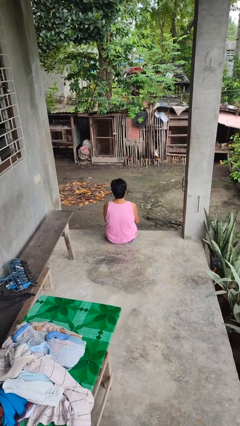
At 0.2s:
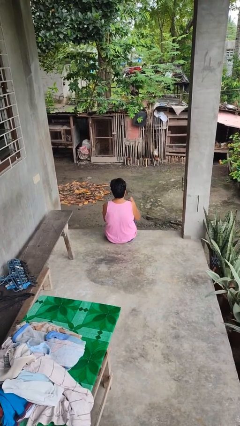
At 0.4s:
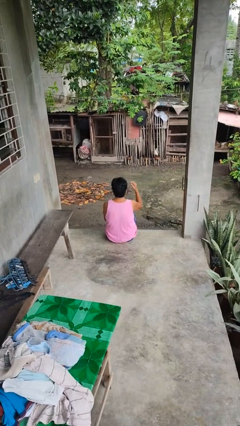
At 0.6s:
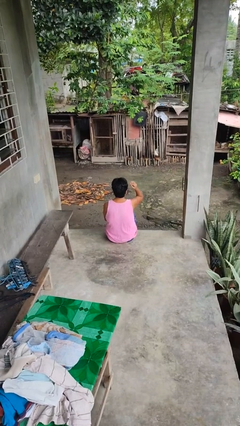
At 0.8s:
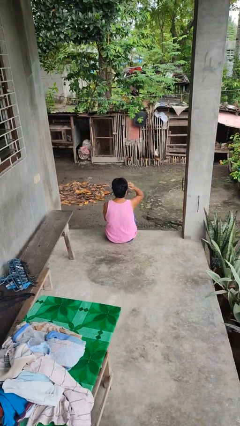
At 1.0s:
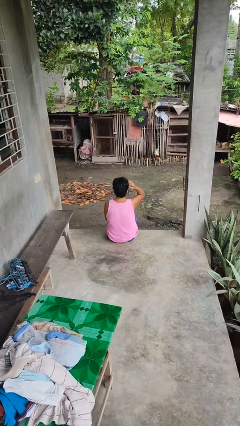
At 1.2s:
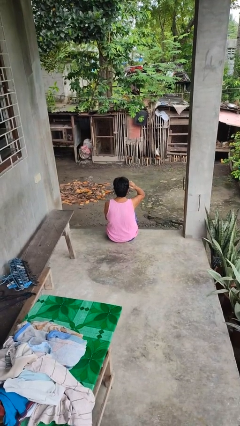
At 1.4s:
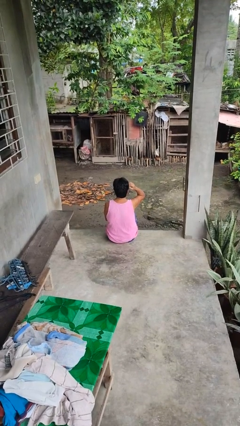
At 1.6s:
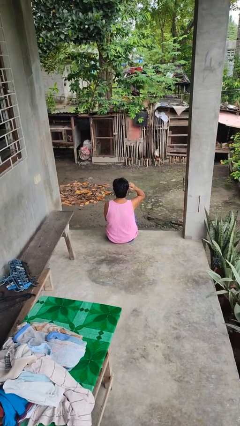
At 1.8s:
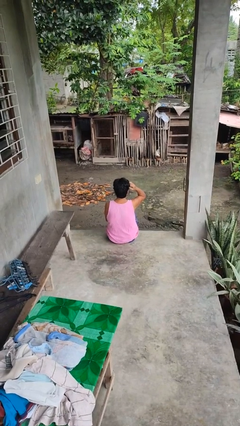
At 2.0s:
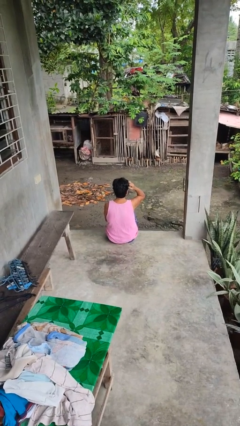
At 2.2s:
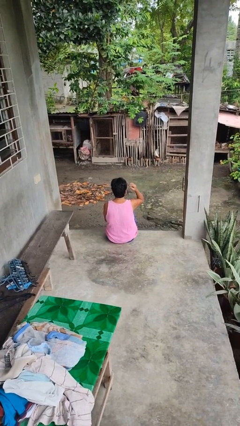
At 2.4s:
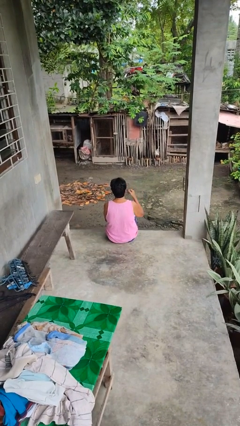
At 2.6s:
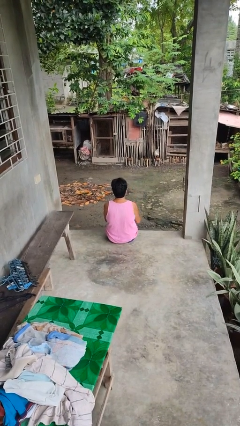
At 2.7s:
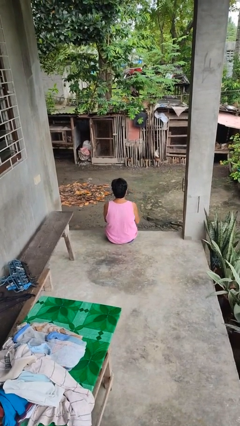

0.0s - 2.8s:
person scratches face

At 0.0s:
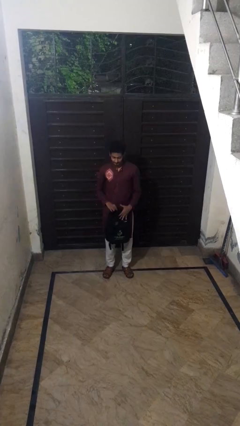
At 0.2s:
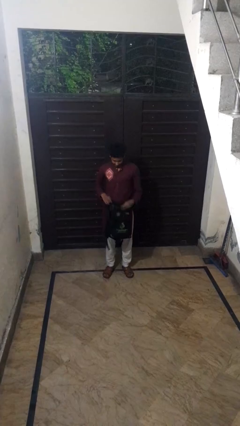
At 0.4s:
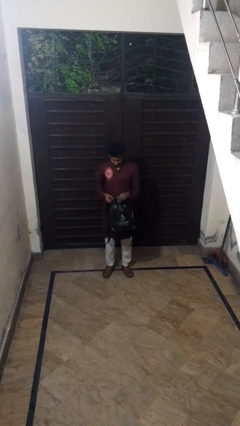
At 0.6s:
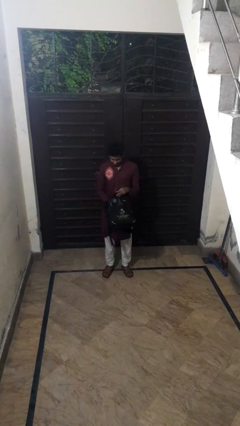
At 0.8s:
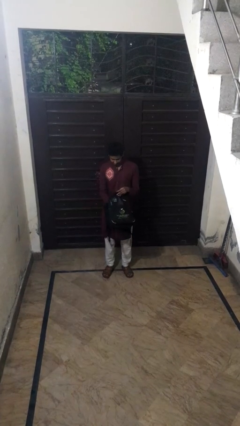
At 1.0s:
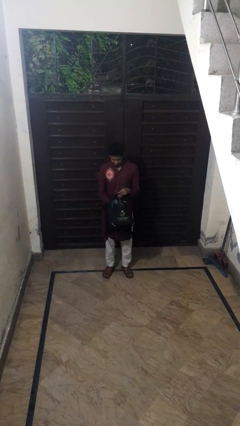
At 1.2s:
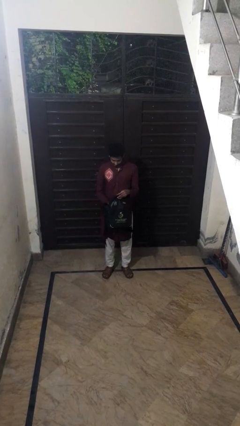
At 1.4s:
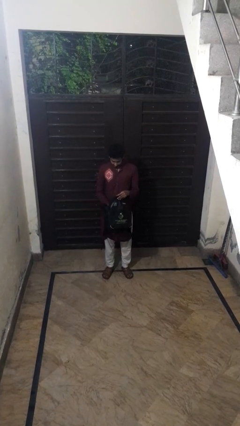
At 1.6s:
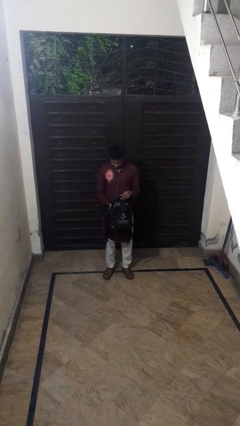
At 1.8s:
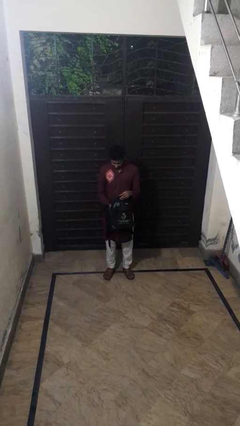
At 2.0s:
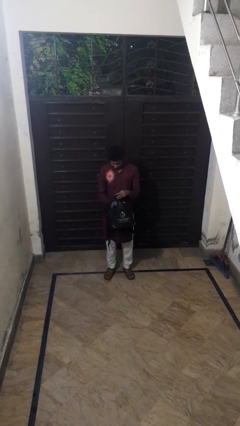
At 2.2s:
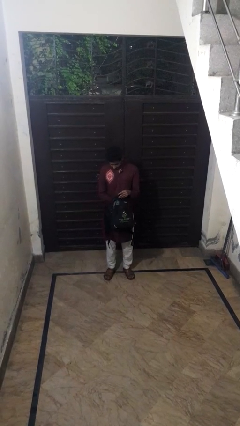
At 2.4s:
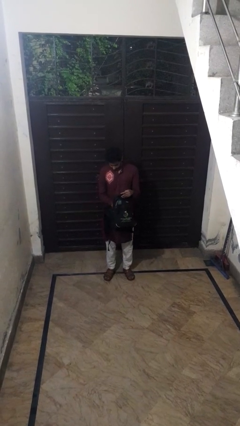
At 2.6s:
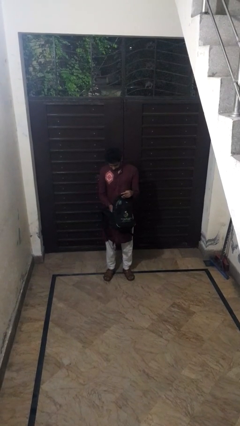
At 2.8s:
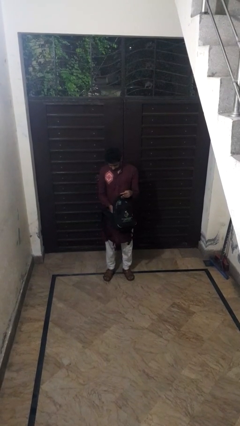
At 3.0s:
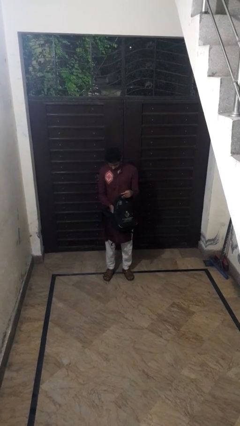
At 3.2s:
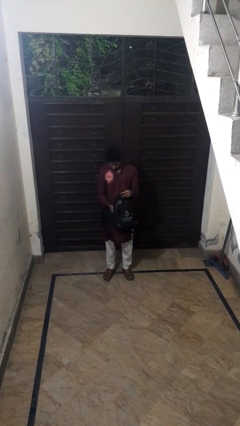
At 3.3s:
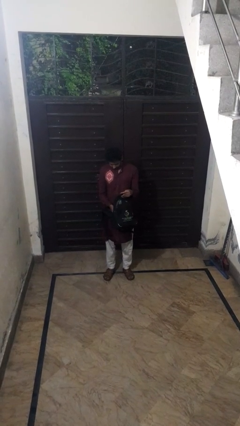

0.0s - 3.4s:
person searches in backpack

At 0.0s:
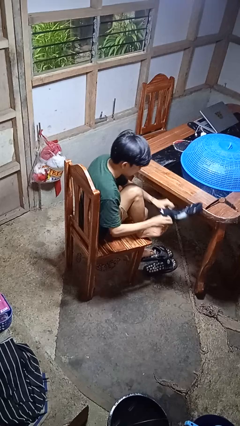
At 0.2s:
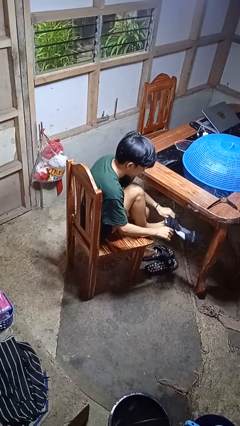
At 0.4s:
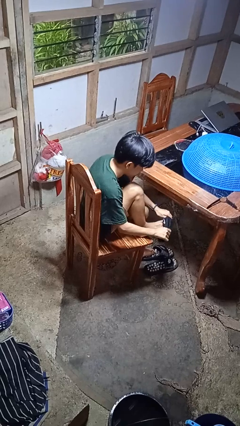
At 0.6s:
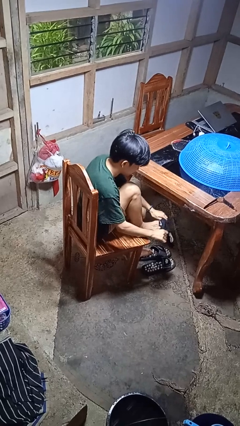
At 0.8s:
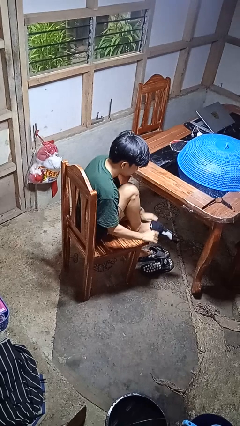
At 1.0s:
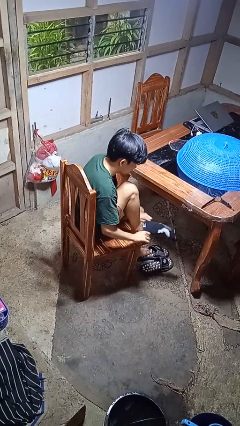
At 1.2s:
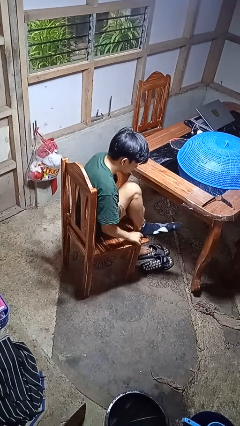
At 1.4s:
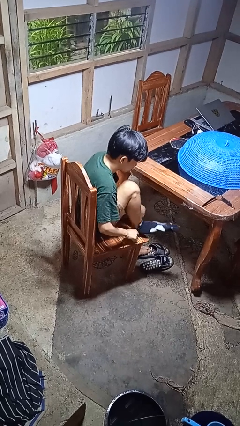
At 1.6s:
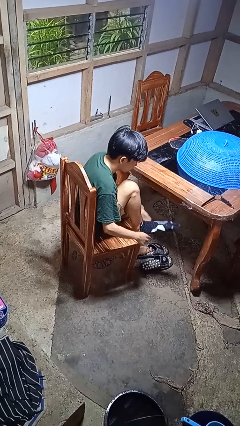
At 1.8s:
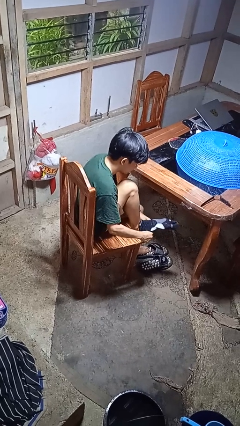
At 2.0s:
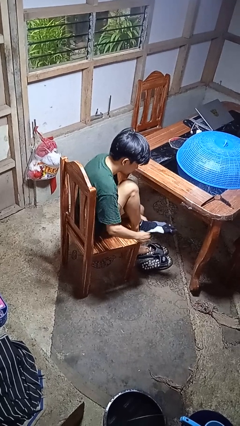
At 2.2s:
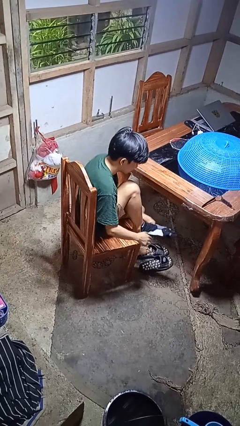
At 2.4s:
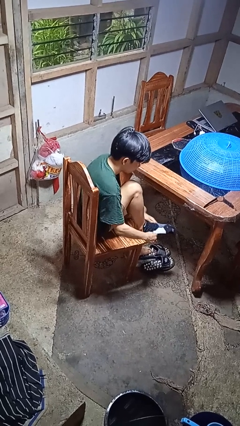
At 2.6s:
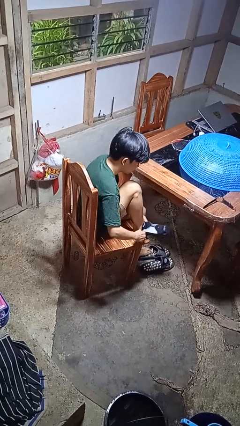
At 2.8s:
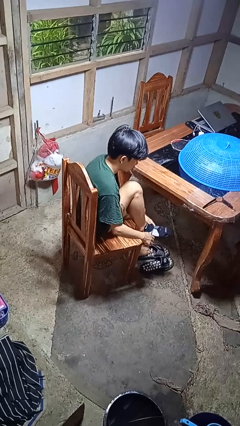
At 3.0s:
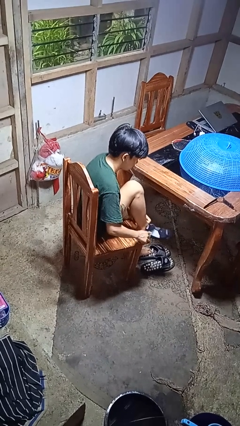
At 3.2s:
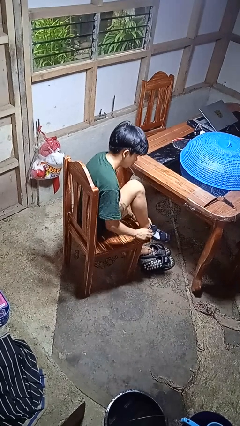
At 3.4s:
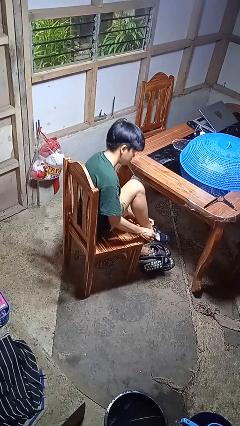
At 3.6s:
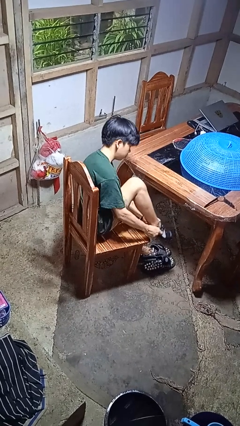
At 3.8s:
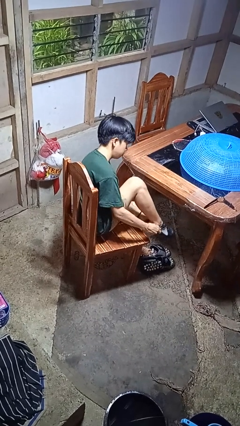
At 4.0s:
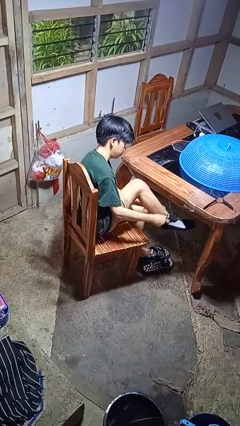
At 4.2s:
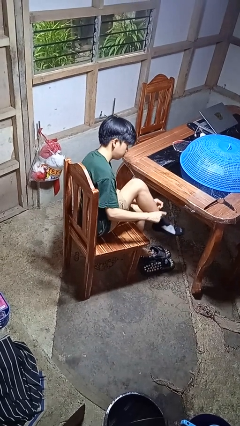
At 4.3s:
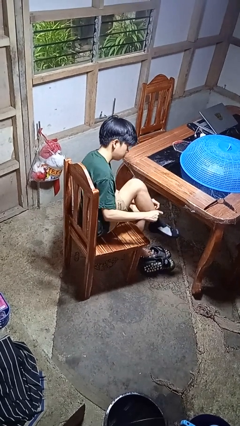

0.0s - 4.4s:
person puts on socks

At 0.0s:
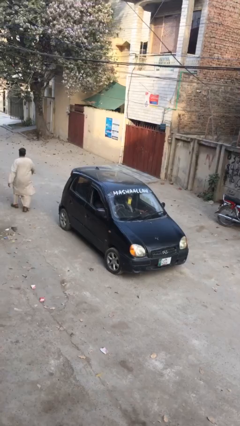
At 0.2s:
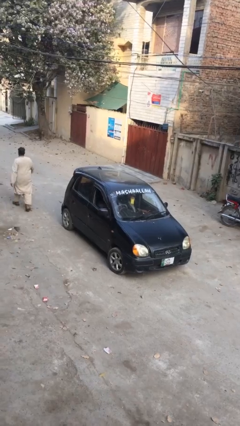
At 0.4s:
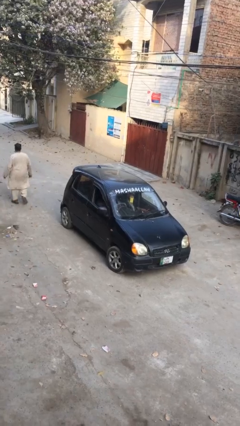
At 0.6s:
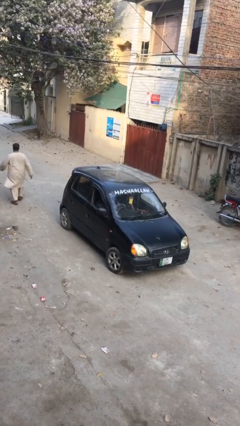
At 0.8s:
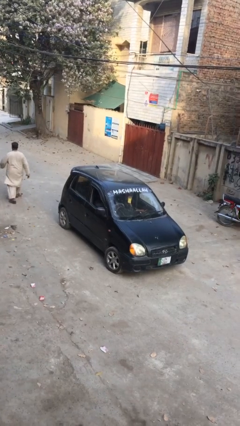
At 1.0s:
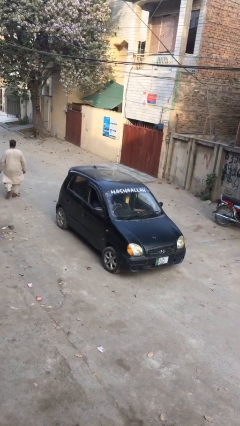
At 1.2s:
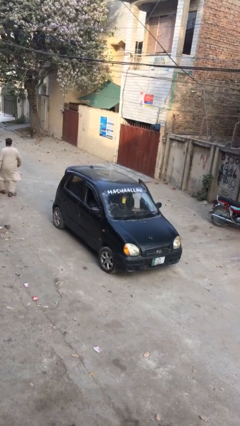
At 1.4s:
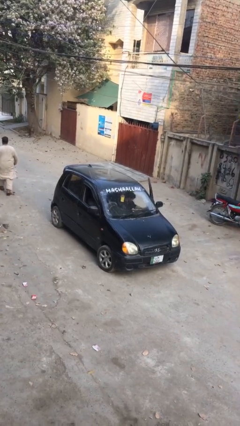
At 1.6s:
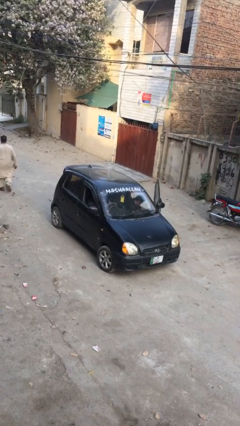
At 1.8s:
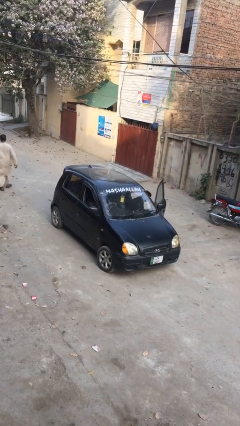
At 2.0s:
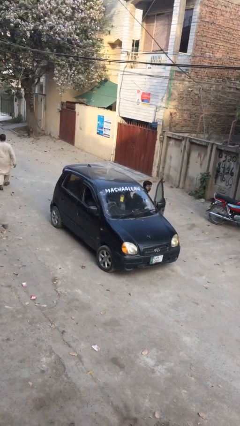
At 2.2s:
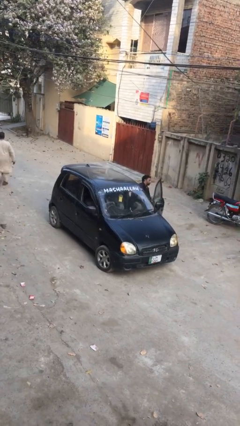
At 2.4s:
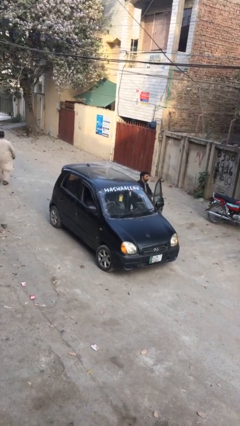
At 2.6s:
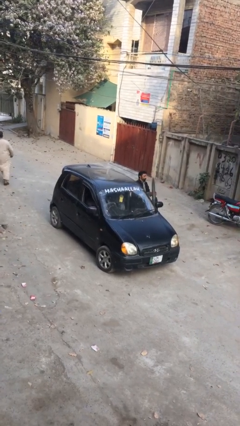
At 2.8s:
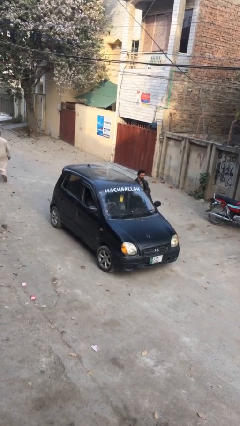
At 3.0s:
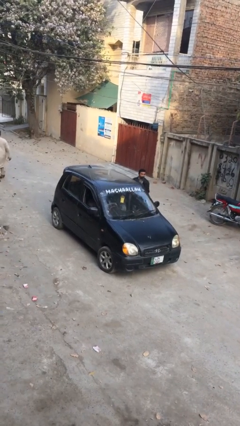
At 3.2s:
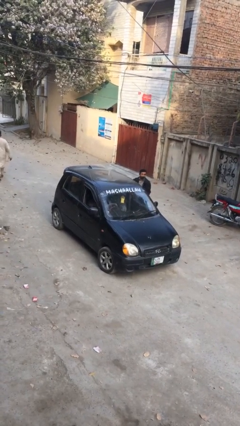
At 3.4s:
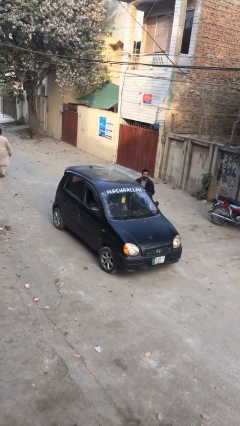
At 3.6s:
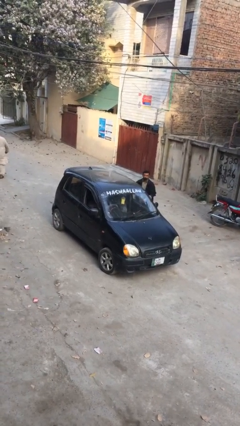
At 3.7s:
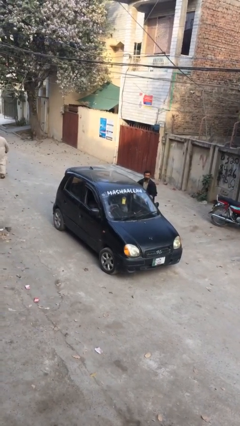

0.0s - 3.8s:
person exits car

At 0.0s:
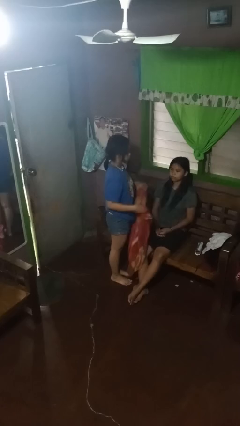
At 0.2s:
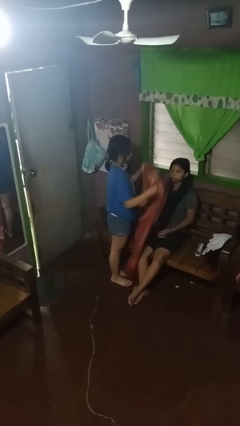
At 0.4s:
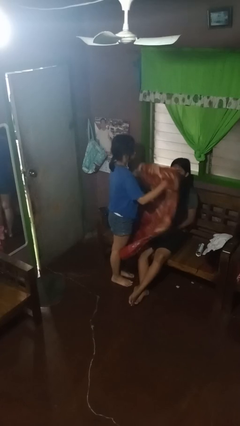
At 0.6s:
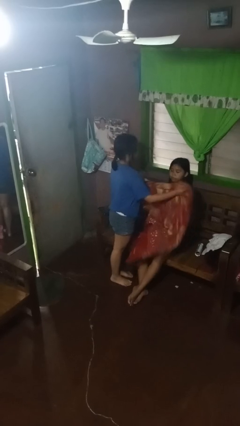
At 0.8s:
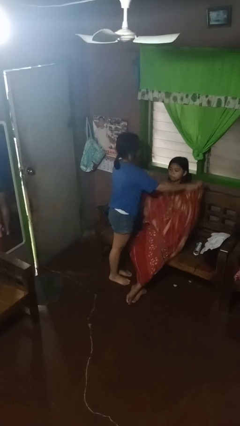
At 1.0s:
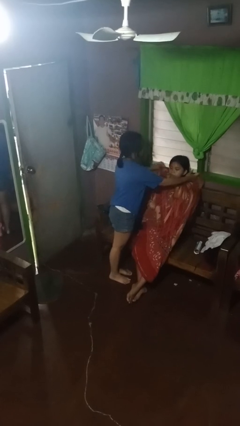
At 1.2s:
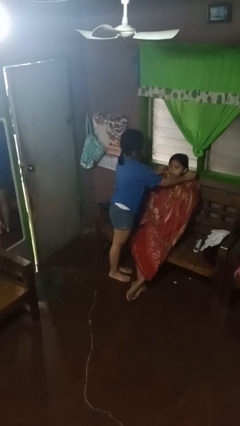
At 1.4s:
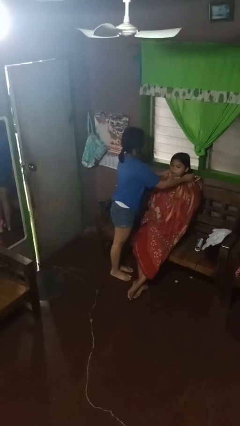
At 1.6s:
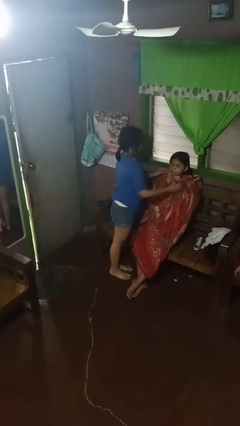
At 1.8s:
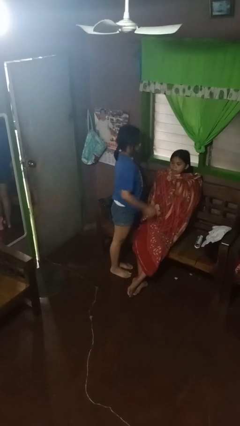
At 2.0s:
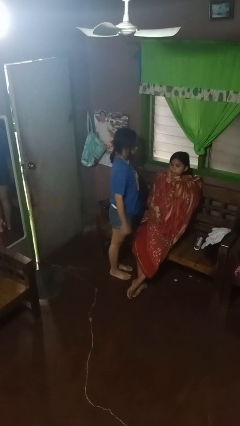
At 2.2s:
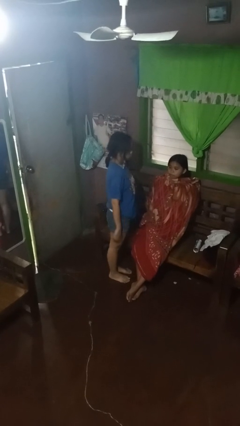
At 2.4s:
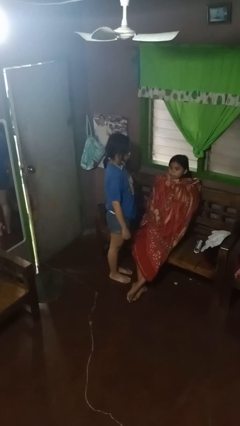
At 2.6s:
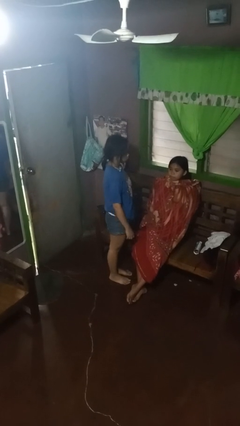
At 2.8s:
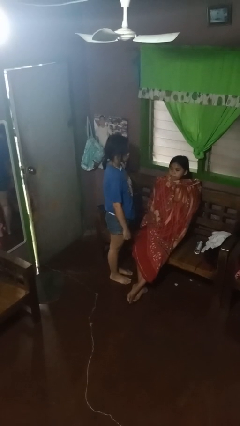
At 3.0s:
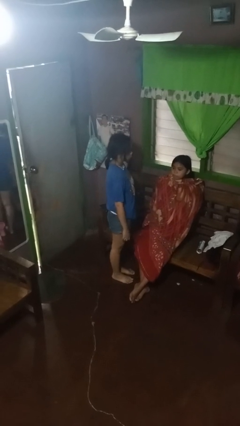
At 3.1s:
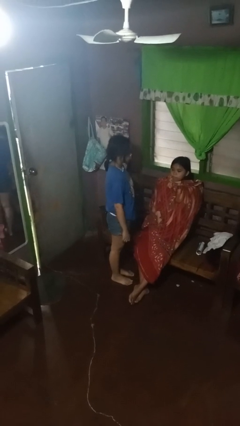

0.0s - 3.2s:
person covers friend with blanket
